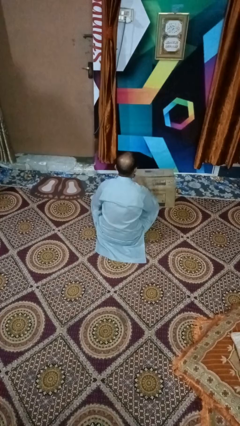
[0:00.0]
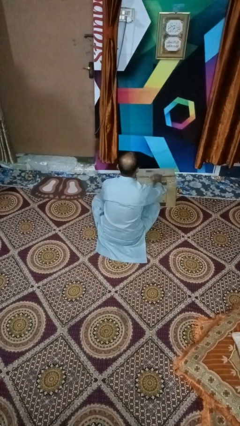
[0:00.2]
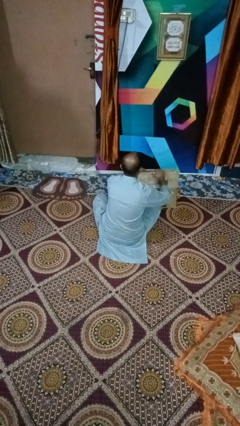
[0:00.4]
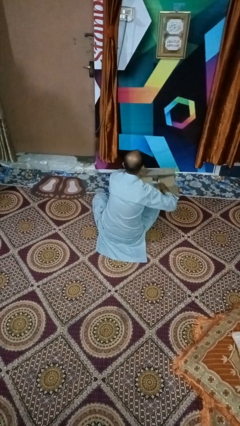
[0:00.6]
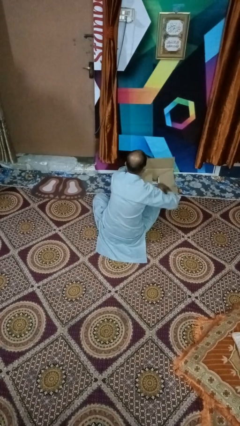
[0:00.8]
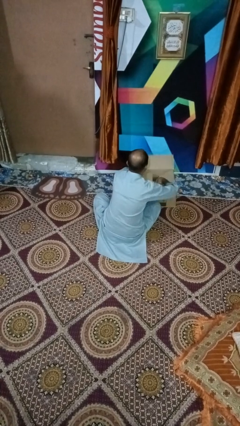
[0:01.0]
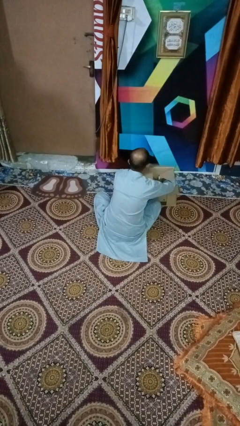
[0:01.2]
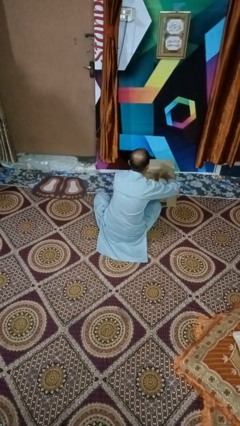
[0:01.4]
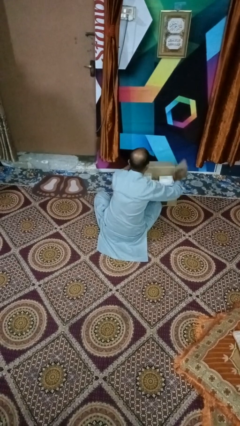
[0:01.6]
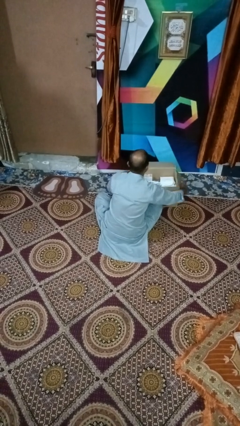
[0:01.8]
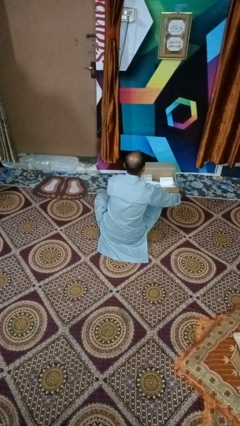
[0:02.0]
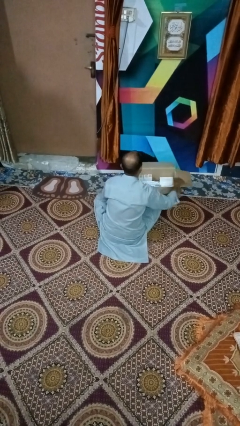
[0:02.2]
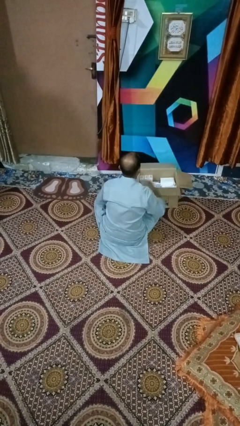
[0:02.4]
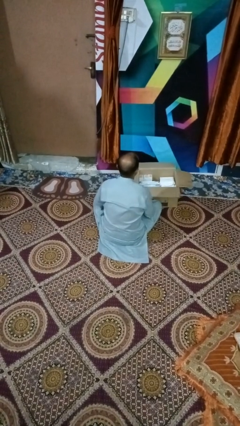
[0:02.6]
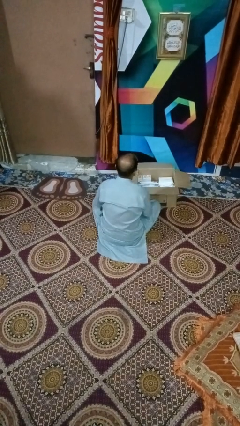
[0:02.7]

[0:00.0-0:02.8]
person opens box

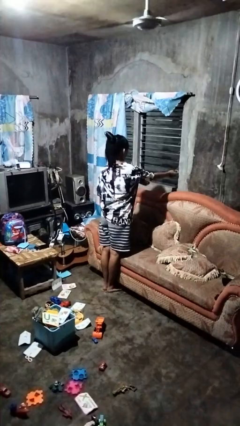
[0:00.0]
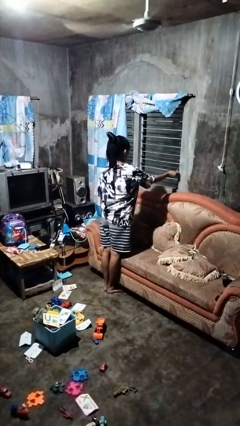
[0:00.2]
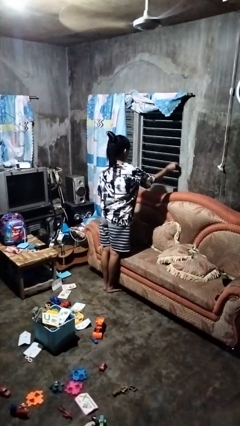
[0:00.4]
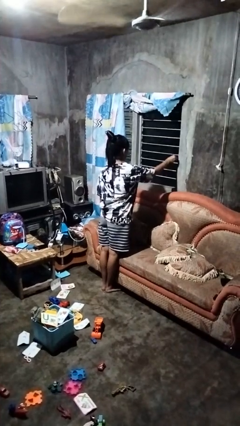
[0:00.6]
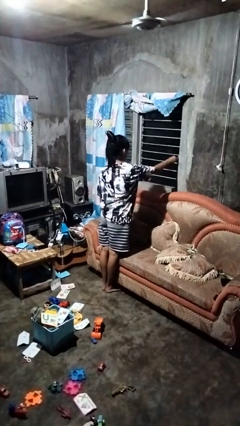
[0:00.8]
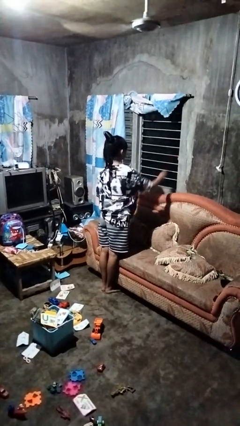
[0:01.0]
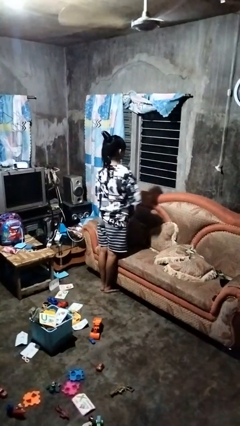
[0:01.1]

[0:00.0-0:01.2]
person closes home window

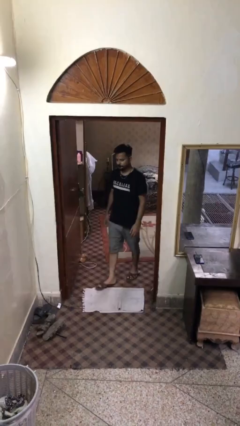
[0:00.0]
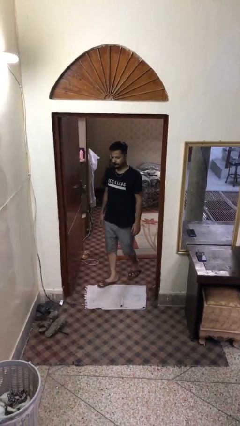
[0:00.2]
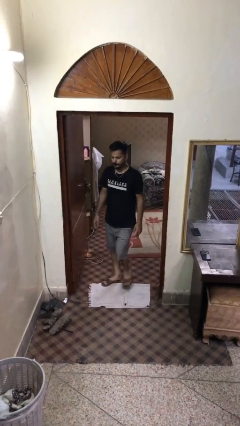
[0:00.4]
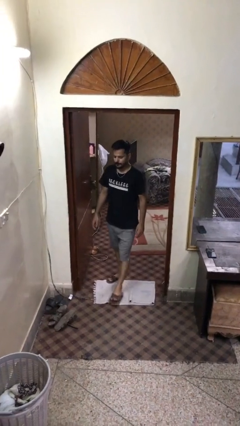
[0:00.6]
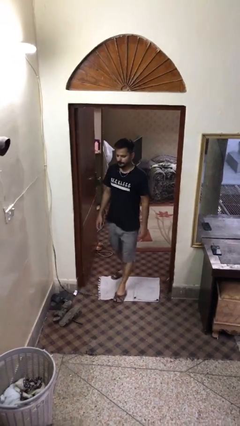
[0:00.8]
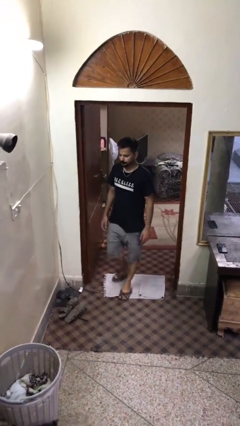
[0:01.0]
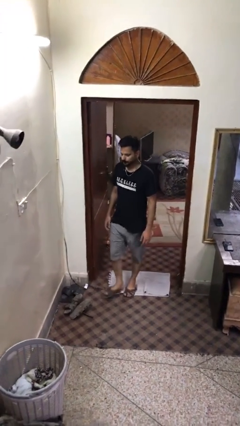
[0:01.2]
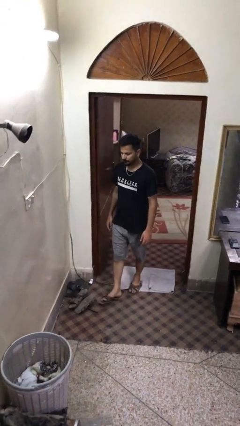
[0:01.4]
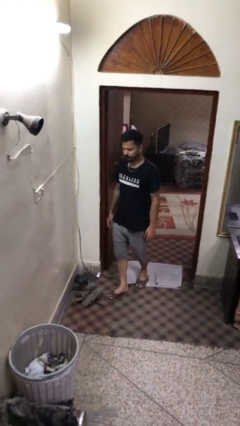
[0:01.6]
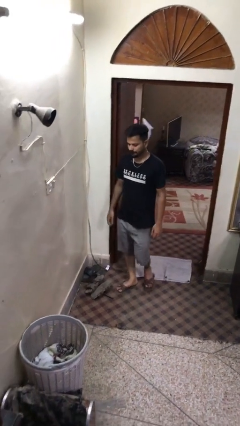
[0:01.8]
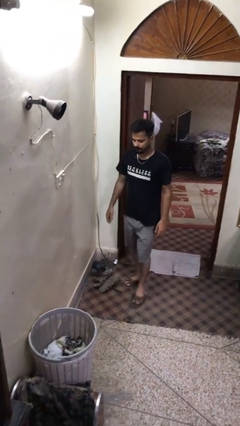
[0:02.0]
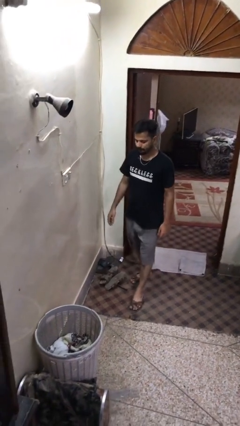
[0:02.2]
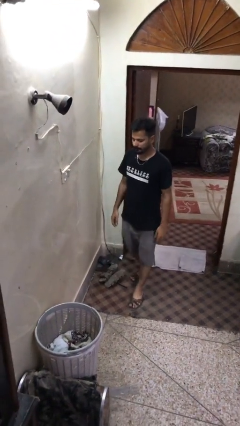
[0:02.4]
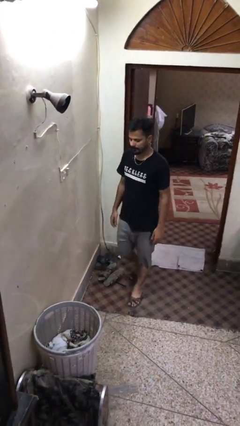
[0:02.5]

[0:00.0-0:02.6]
person enters scene through structure

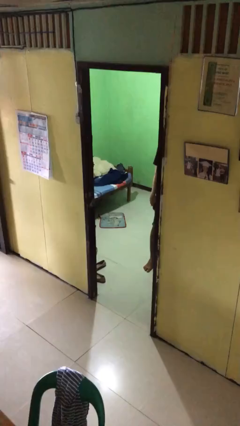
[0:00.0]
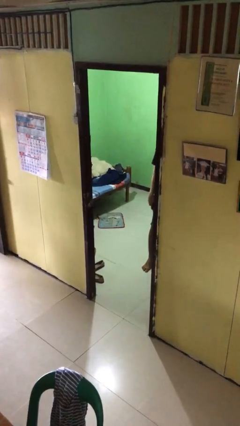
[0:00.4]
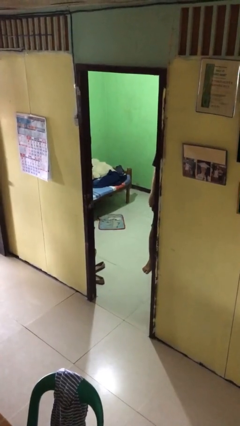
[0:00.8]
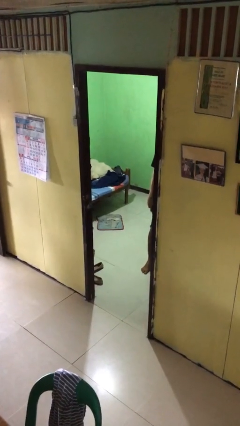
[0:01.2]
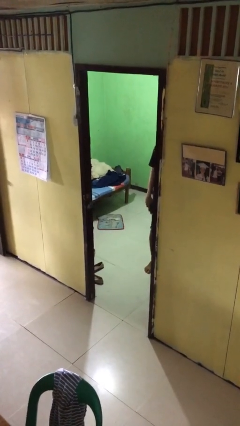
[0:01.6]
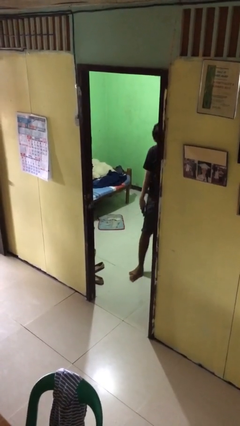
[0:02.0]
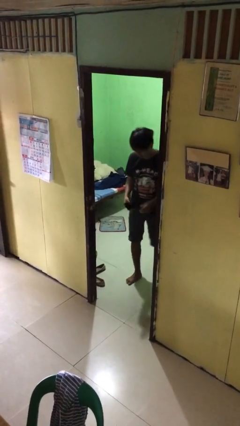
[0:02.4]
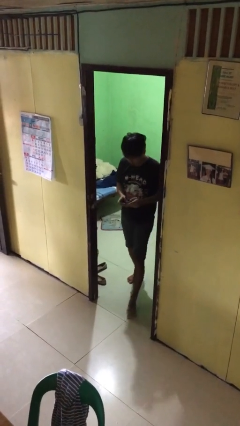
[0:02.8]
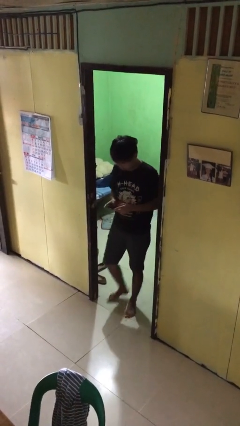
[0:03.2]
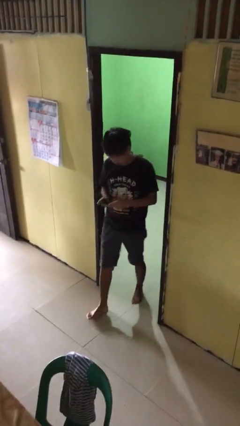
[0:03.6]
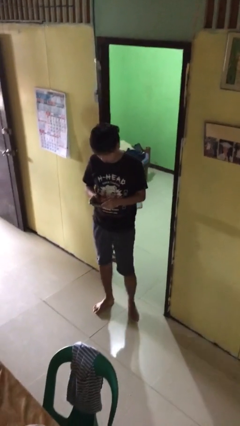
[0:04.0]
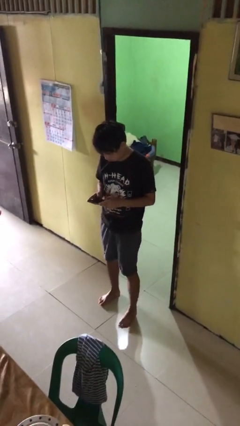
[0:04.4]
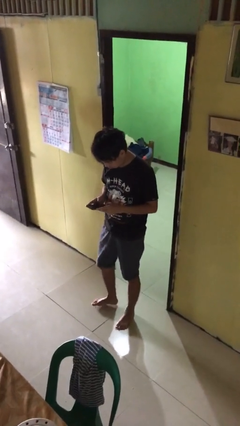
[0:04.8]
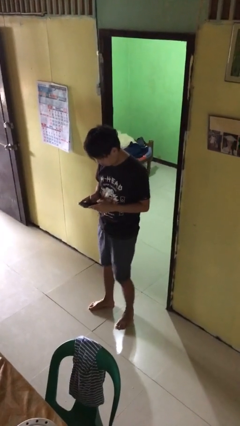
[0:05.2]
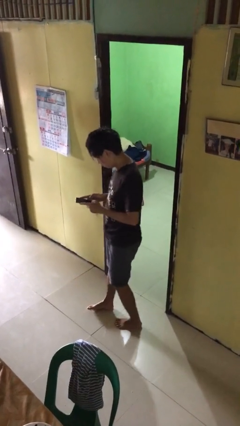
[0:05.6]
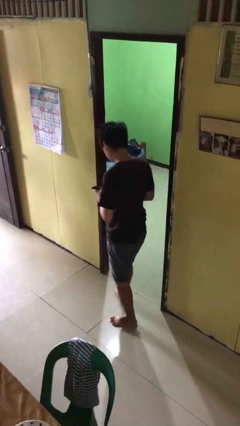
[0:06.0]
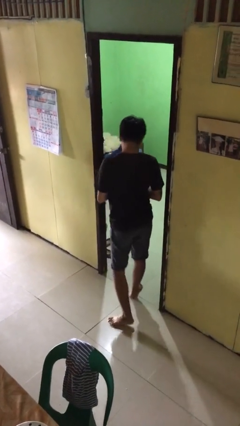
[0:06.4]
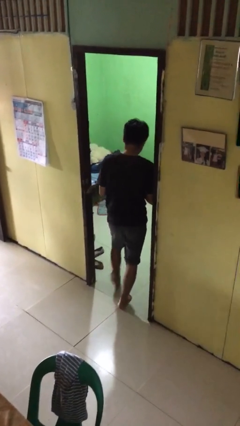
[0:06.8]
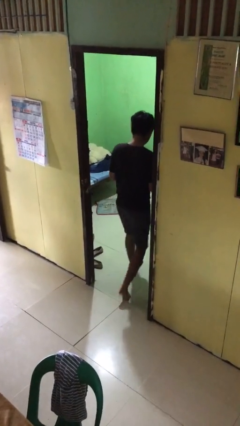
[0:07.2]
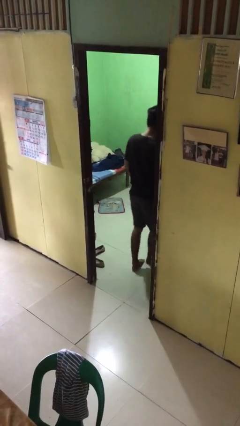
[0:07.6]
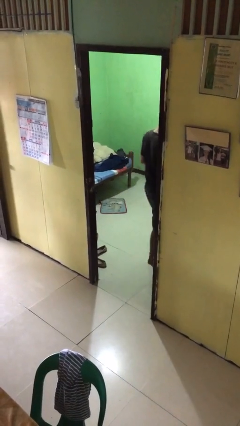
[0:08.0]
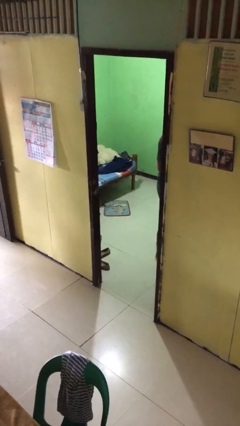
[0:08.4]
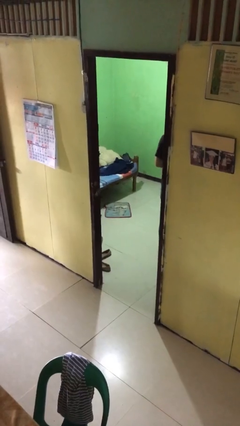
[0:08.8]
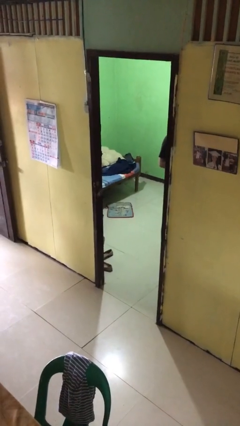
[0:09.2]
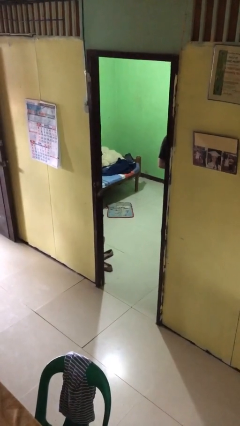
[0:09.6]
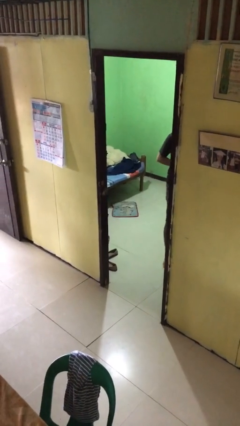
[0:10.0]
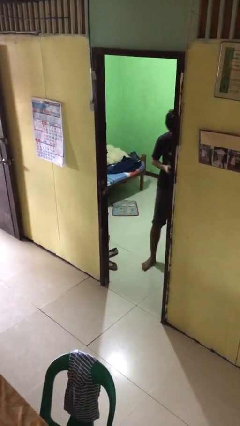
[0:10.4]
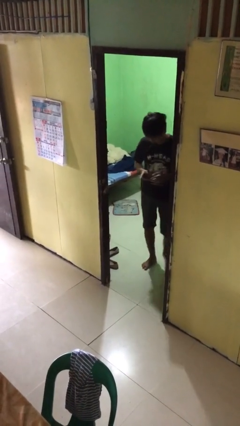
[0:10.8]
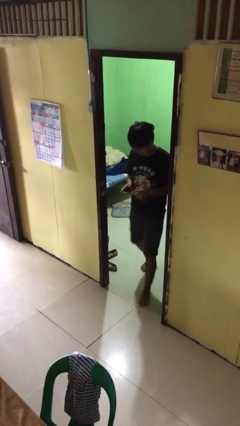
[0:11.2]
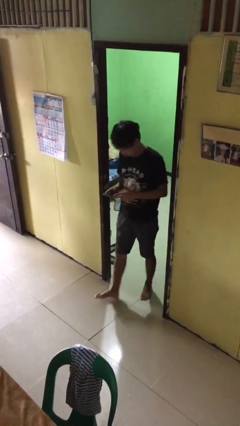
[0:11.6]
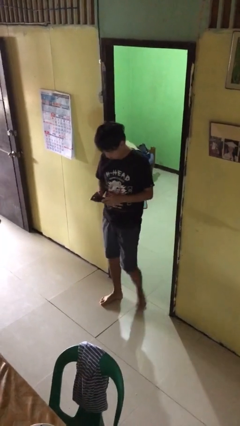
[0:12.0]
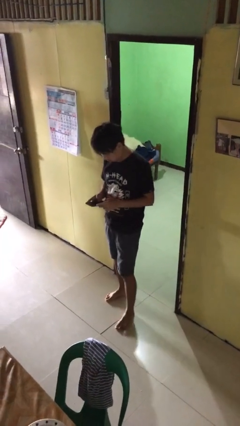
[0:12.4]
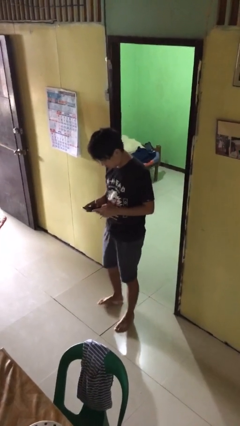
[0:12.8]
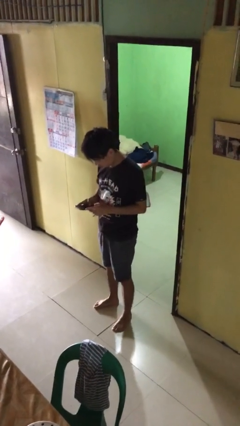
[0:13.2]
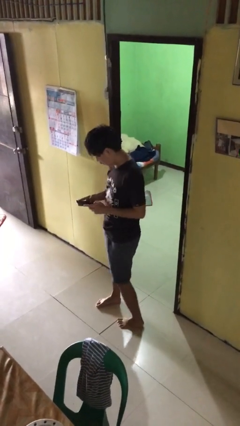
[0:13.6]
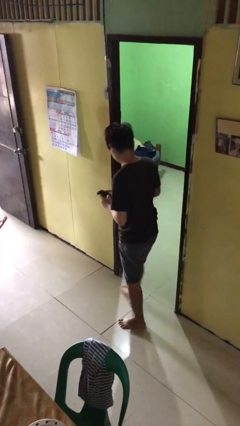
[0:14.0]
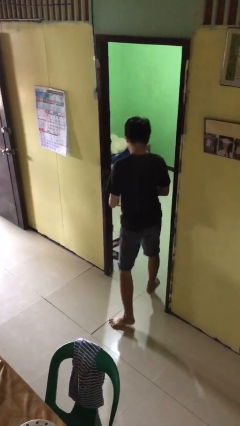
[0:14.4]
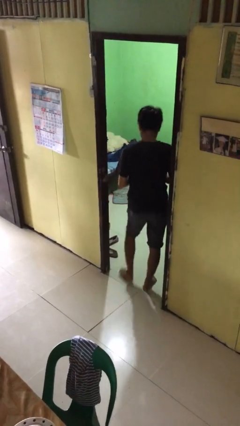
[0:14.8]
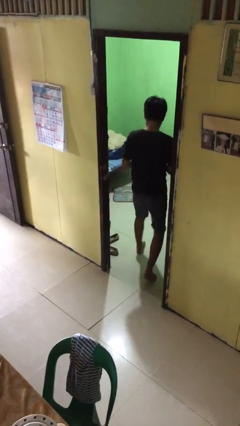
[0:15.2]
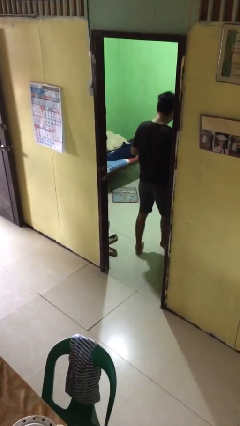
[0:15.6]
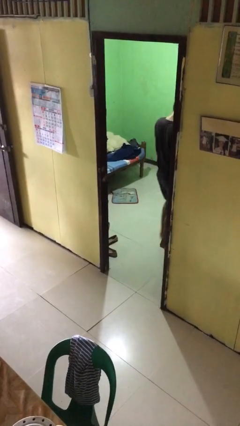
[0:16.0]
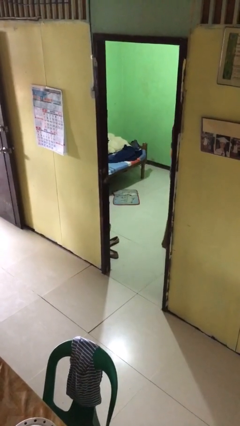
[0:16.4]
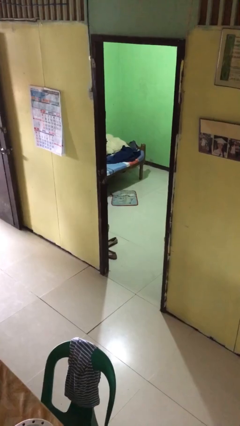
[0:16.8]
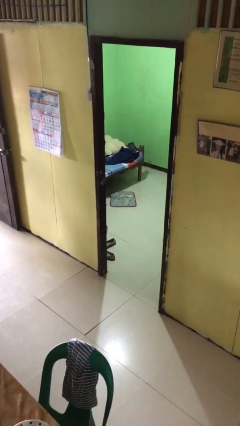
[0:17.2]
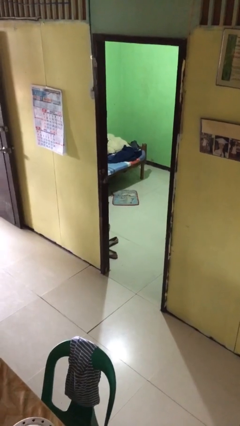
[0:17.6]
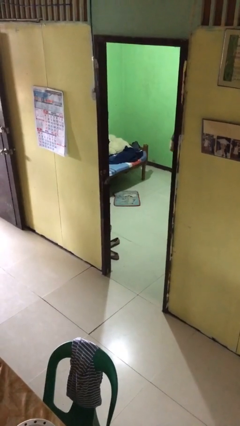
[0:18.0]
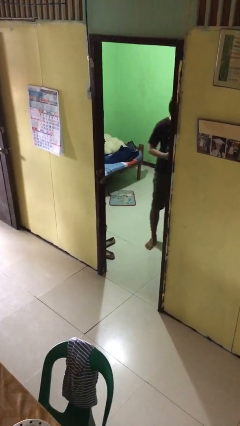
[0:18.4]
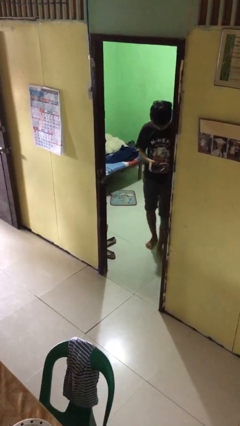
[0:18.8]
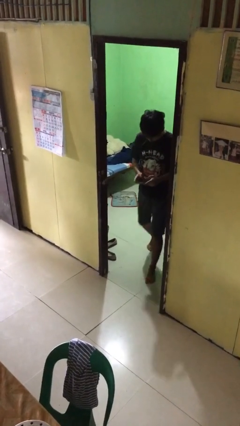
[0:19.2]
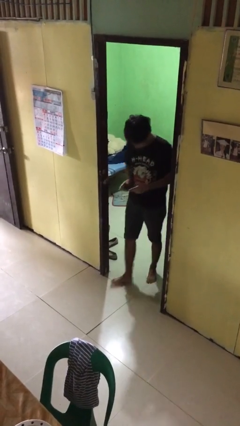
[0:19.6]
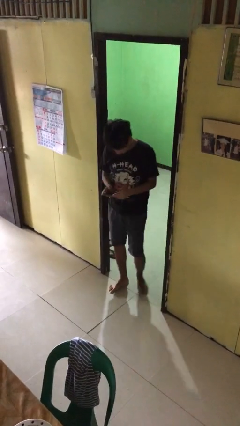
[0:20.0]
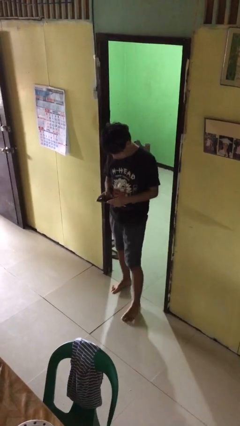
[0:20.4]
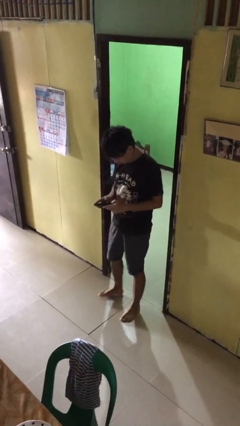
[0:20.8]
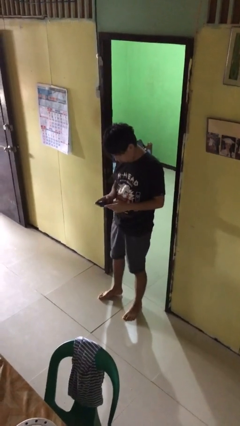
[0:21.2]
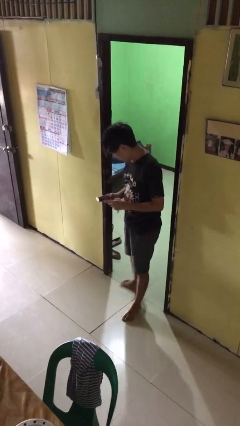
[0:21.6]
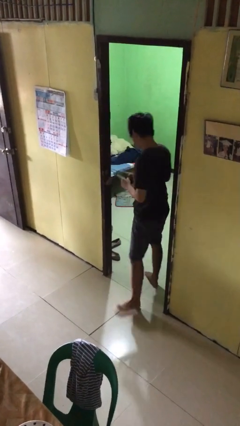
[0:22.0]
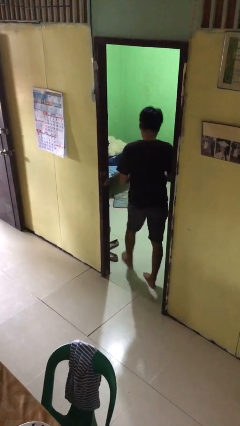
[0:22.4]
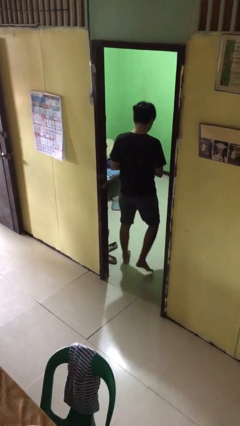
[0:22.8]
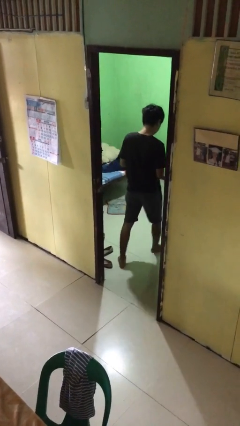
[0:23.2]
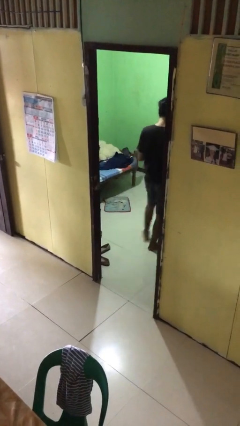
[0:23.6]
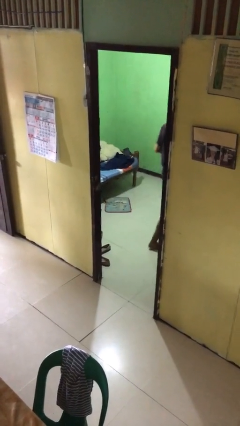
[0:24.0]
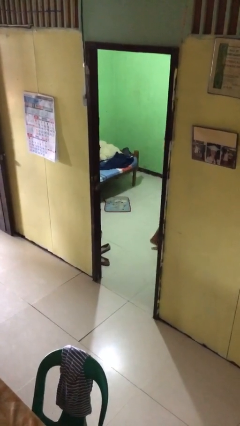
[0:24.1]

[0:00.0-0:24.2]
person texts on phone
